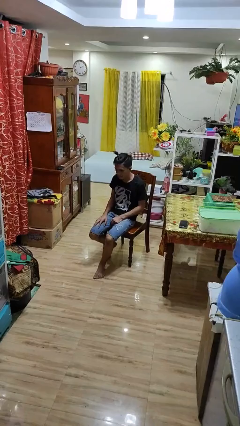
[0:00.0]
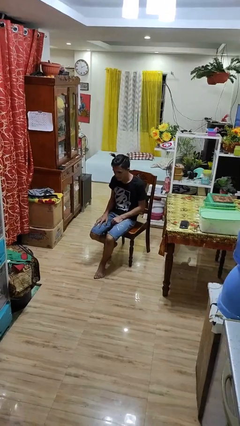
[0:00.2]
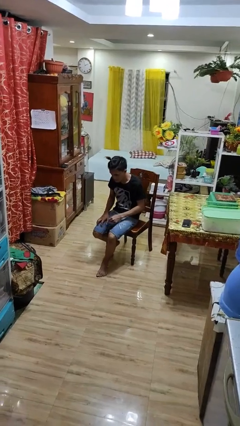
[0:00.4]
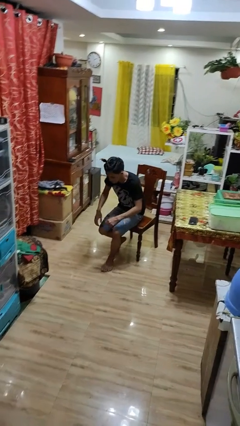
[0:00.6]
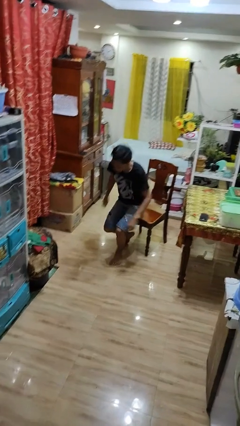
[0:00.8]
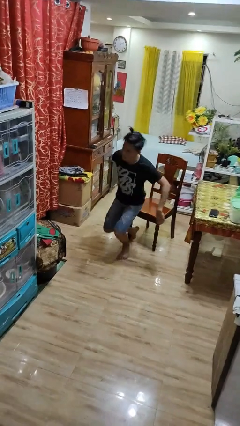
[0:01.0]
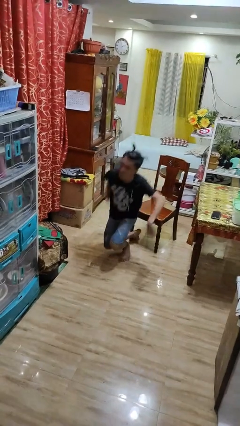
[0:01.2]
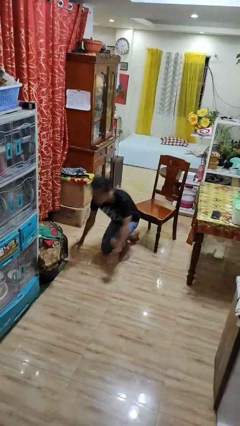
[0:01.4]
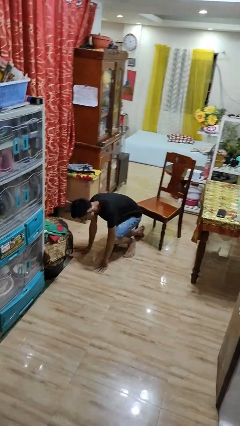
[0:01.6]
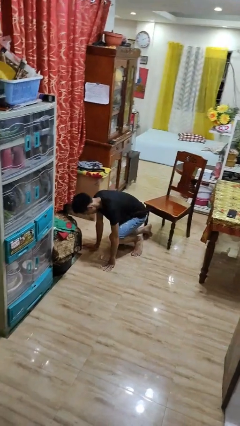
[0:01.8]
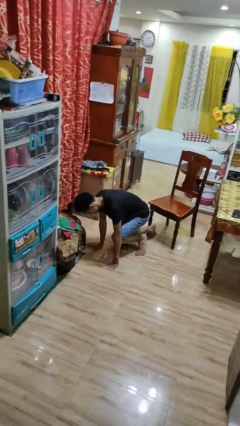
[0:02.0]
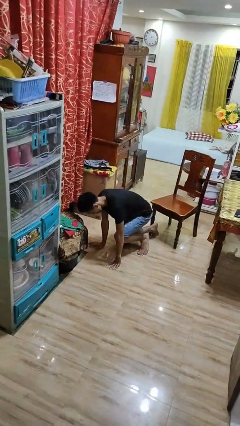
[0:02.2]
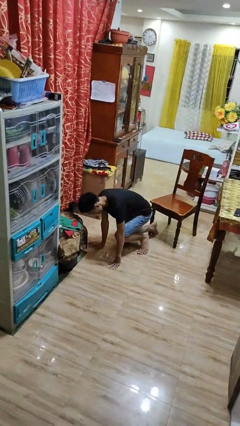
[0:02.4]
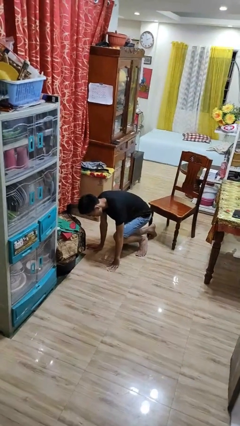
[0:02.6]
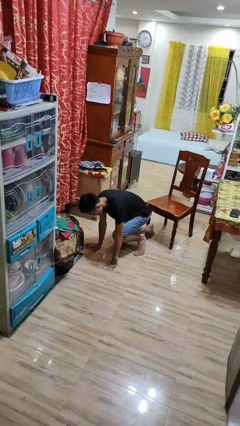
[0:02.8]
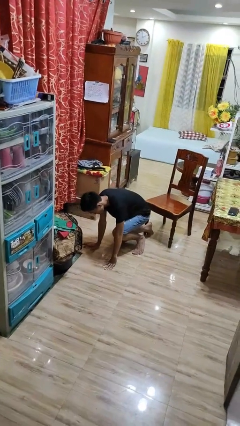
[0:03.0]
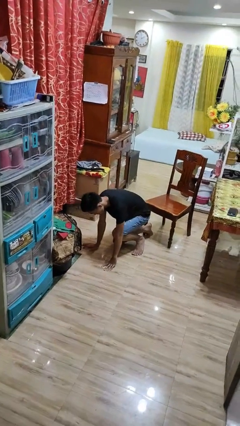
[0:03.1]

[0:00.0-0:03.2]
person falls from chair

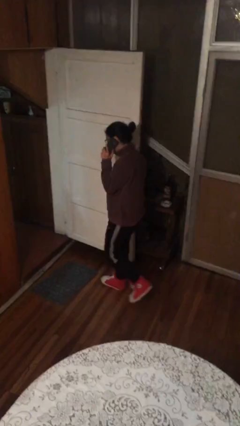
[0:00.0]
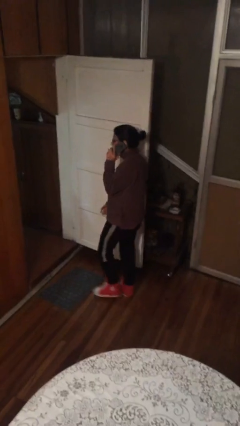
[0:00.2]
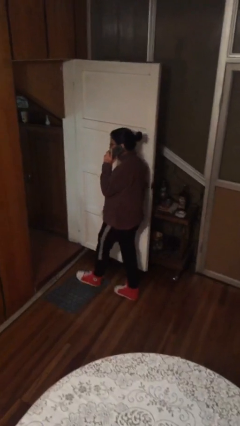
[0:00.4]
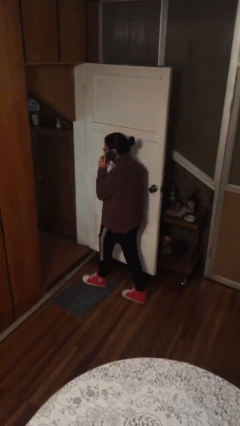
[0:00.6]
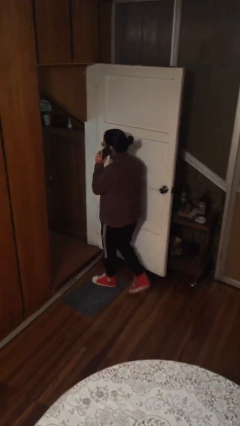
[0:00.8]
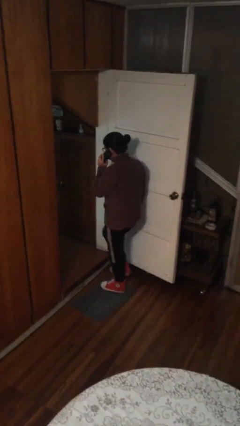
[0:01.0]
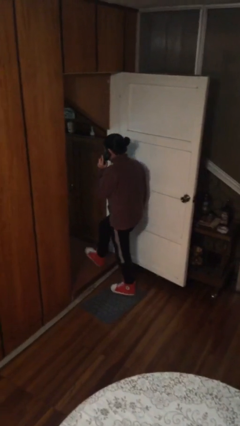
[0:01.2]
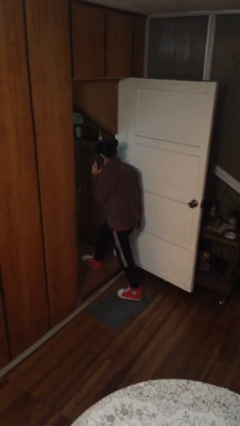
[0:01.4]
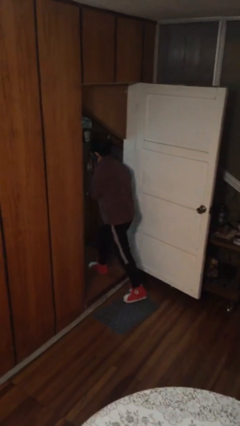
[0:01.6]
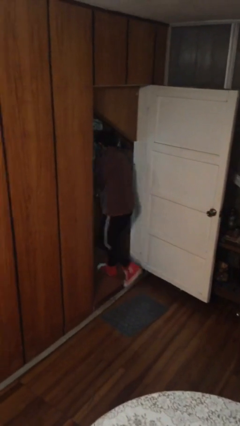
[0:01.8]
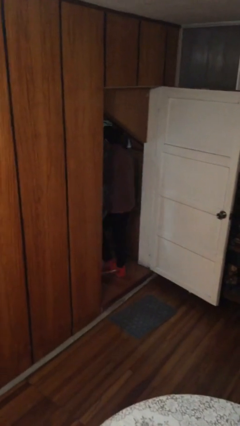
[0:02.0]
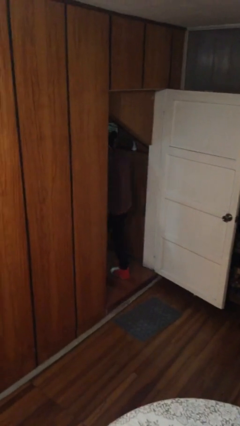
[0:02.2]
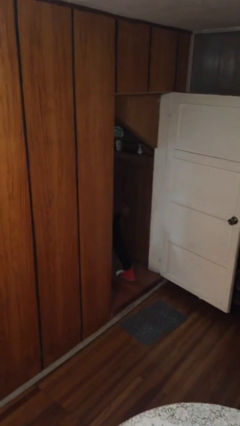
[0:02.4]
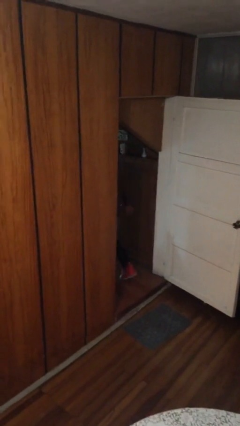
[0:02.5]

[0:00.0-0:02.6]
person exits scene through structure

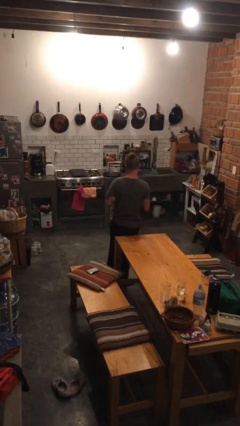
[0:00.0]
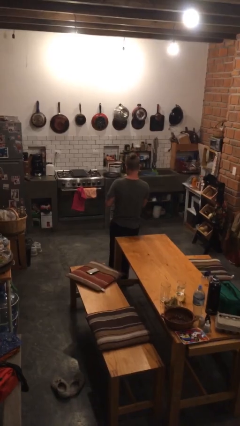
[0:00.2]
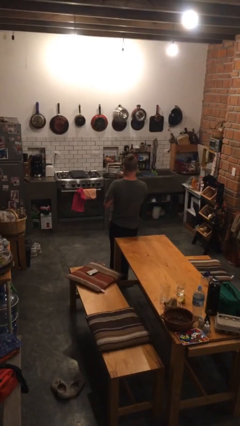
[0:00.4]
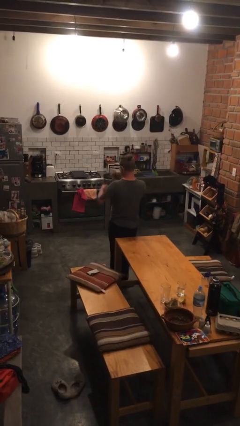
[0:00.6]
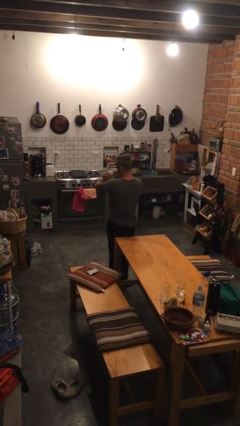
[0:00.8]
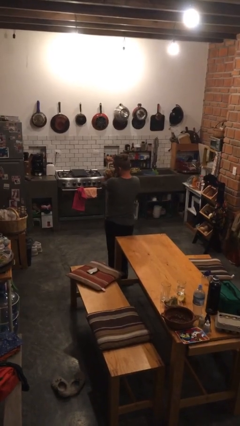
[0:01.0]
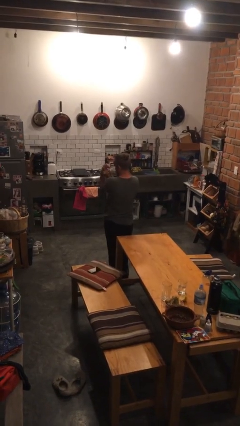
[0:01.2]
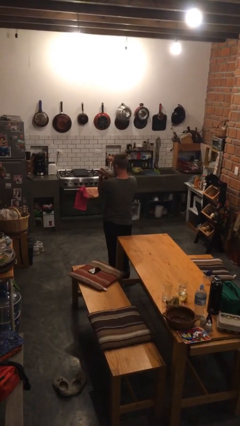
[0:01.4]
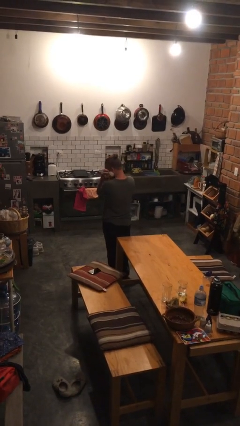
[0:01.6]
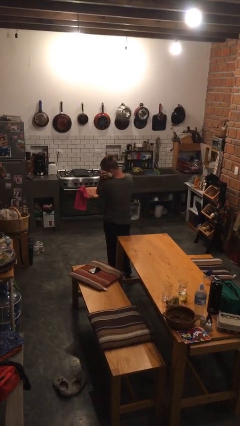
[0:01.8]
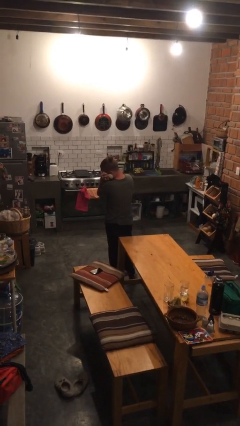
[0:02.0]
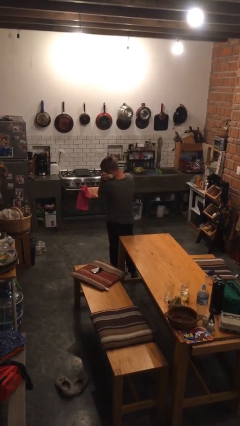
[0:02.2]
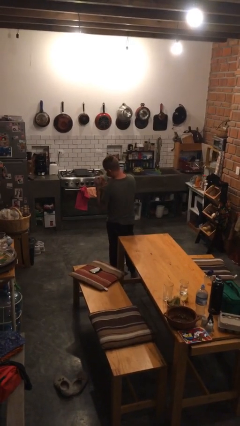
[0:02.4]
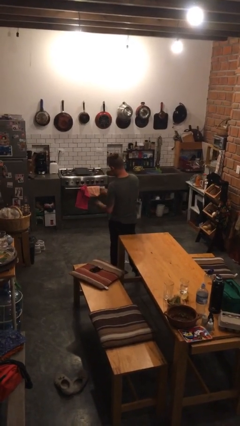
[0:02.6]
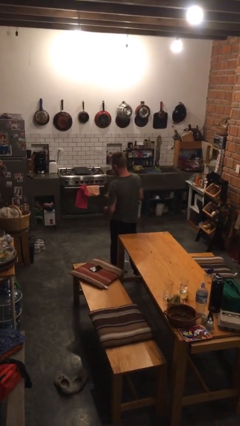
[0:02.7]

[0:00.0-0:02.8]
person hugs stuffed animal

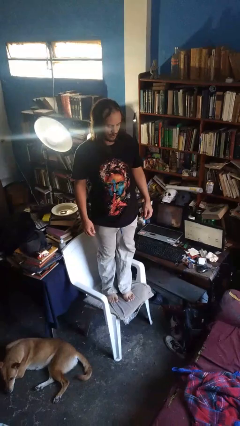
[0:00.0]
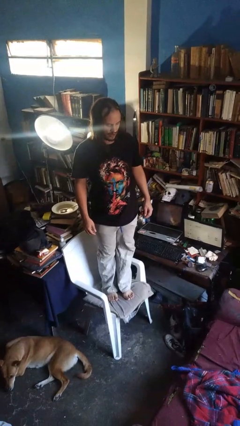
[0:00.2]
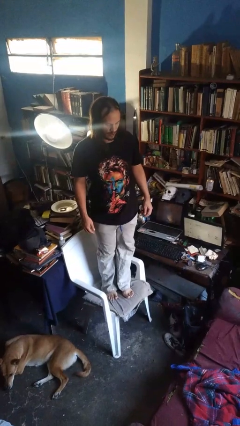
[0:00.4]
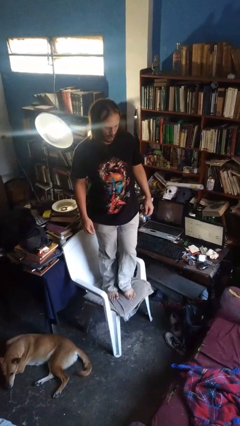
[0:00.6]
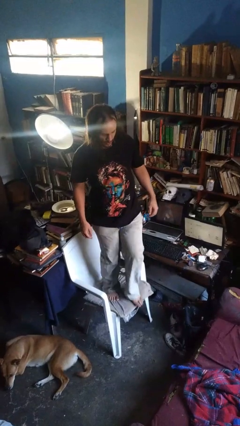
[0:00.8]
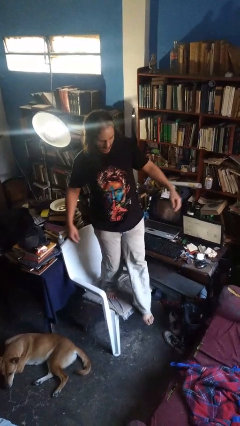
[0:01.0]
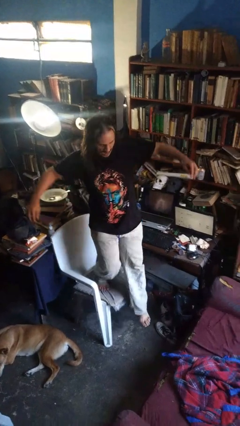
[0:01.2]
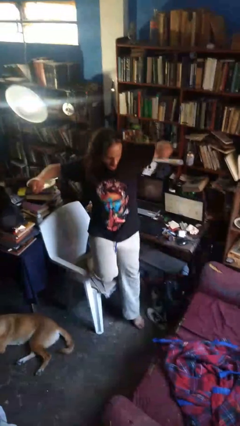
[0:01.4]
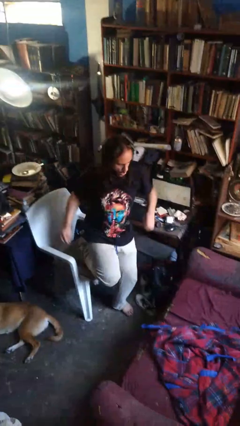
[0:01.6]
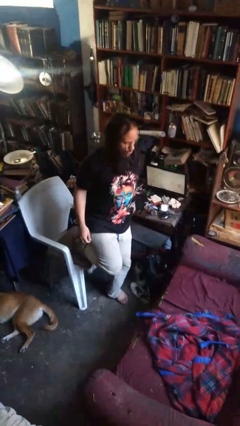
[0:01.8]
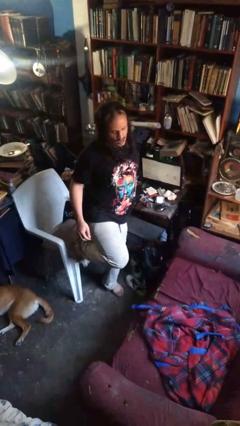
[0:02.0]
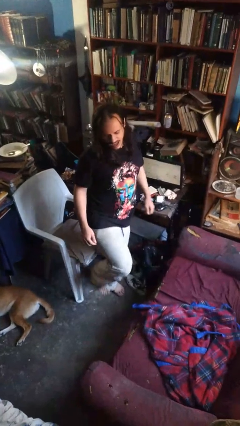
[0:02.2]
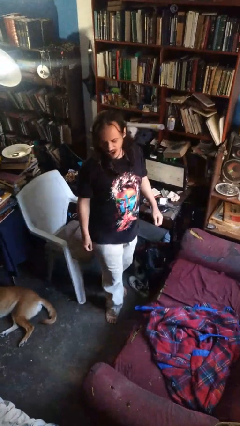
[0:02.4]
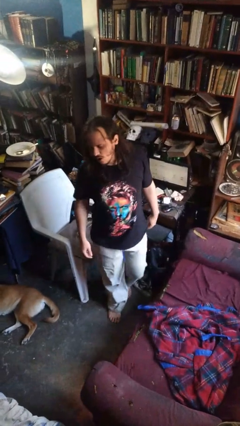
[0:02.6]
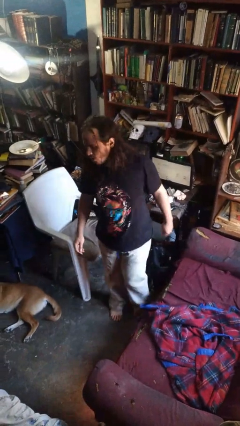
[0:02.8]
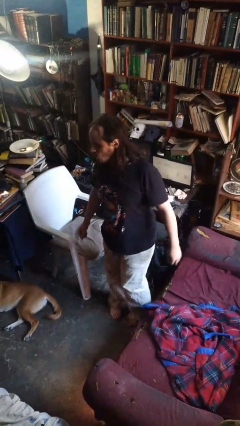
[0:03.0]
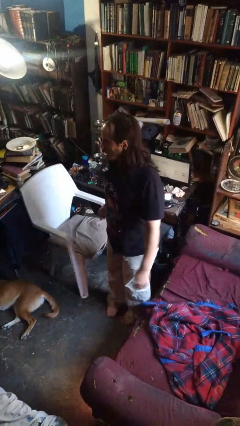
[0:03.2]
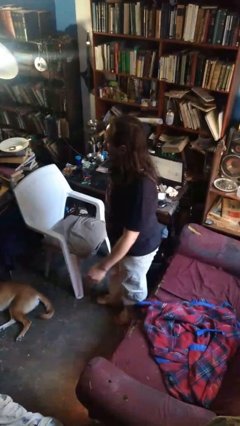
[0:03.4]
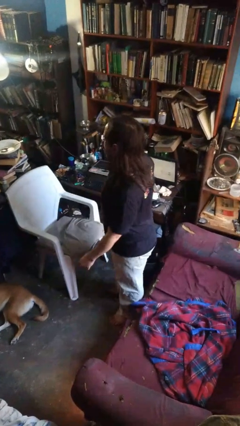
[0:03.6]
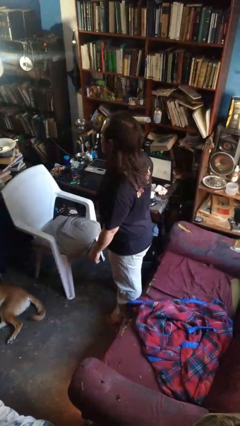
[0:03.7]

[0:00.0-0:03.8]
person climbs off chair

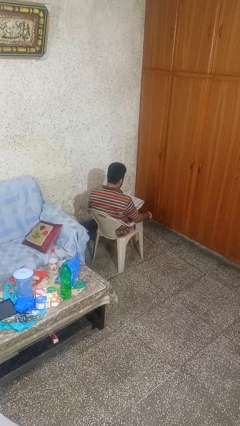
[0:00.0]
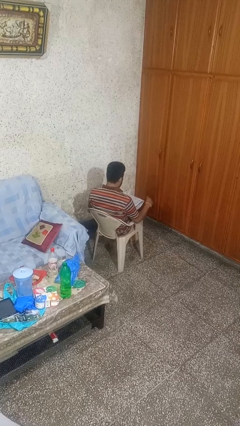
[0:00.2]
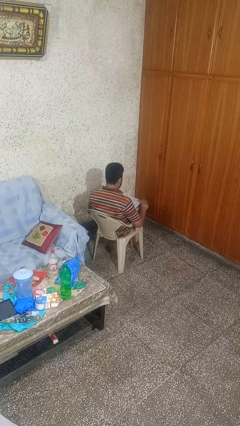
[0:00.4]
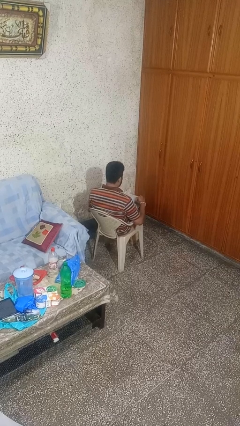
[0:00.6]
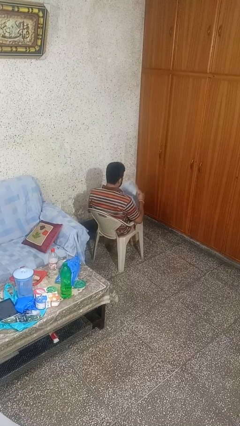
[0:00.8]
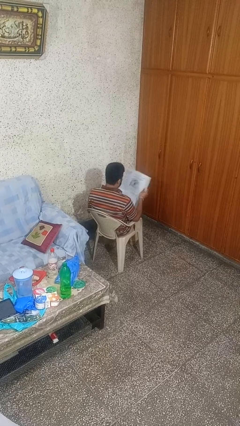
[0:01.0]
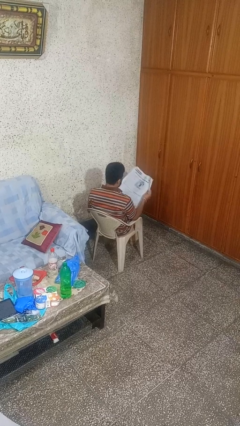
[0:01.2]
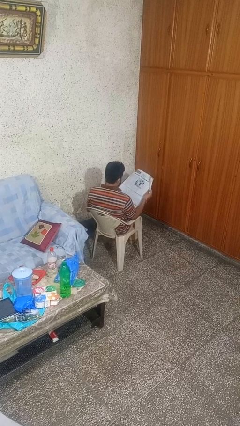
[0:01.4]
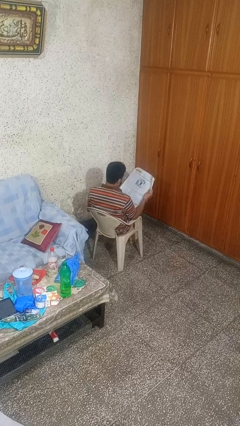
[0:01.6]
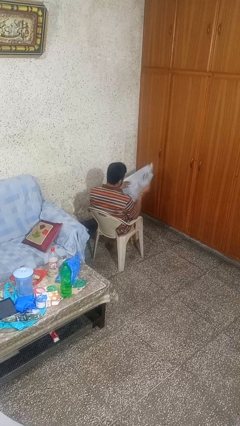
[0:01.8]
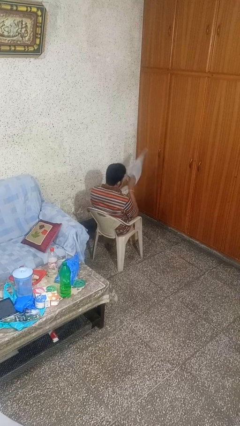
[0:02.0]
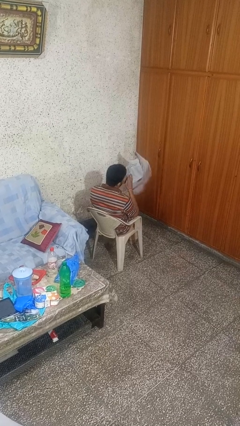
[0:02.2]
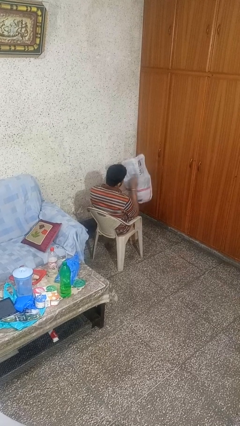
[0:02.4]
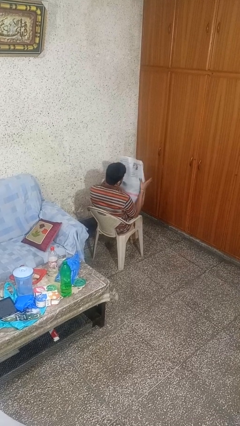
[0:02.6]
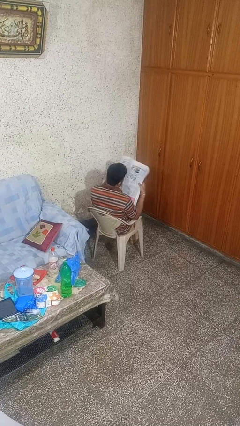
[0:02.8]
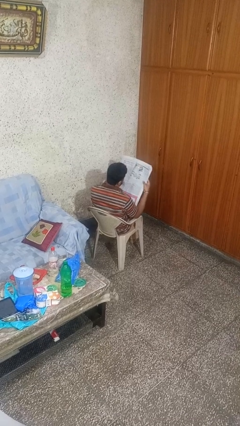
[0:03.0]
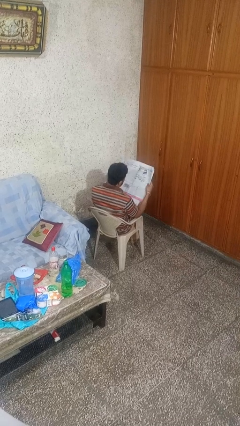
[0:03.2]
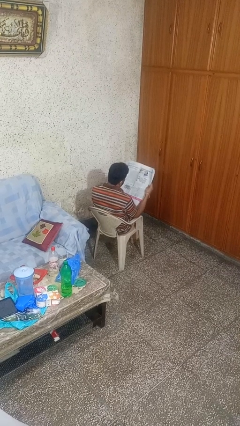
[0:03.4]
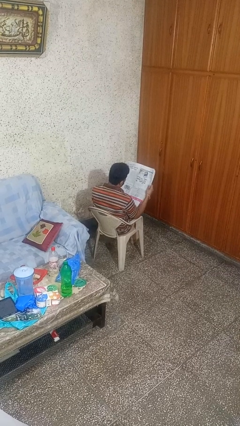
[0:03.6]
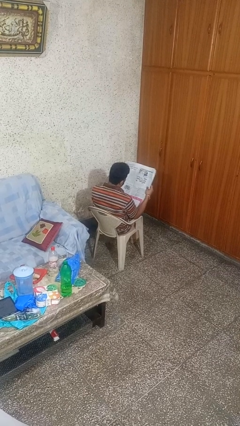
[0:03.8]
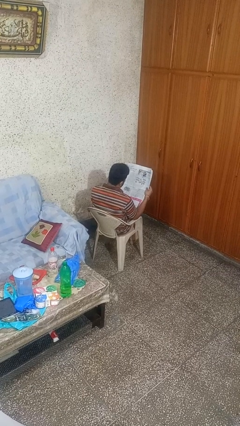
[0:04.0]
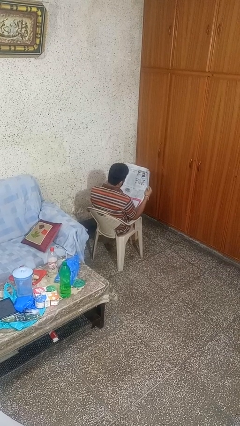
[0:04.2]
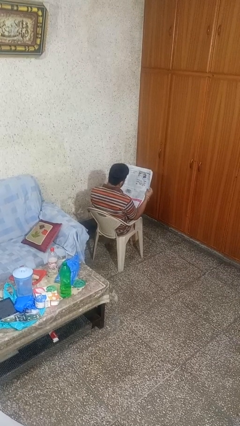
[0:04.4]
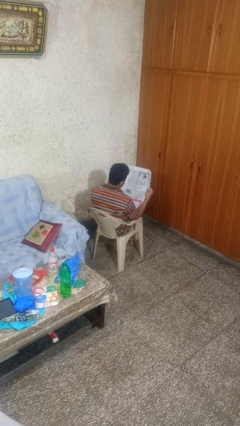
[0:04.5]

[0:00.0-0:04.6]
person reads newspaper

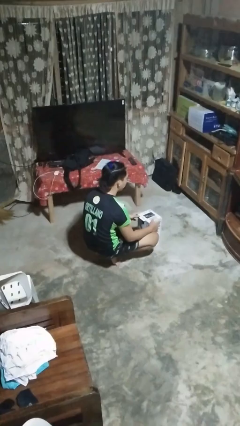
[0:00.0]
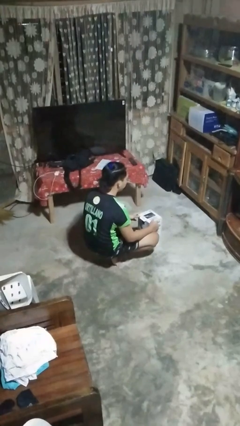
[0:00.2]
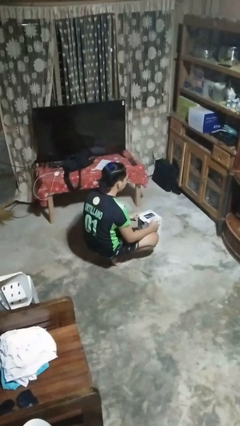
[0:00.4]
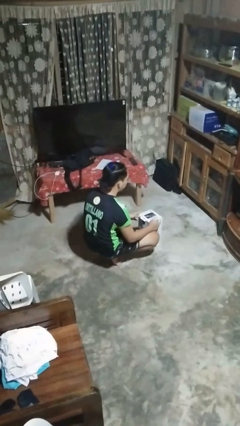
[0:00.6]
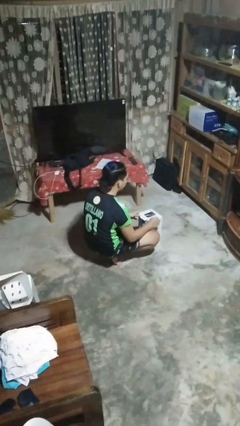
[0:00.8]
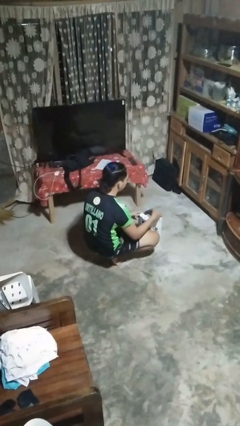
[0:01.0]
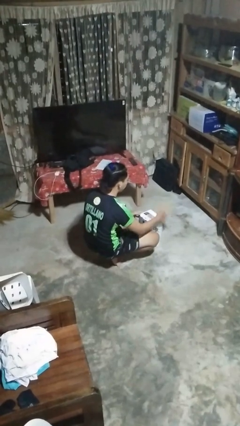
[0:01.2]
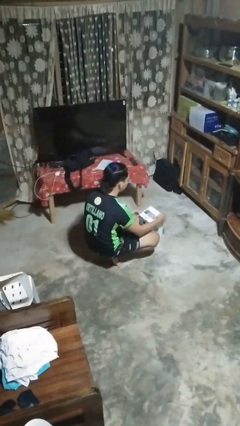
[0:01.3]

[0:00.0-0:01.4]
person opens box
